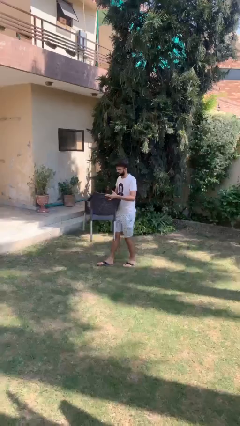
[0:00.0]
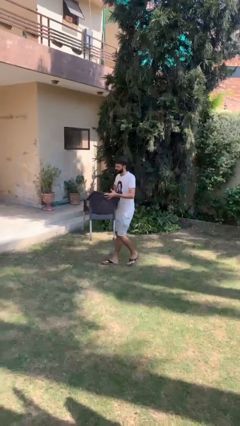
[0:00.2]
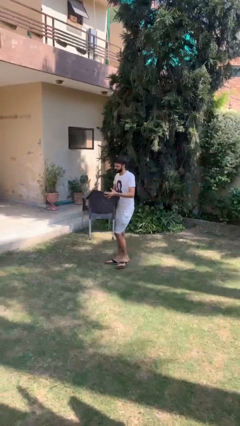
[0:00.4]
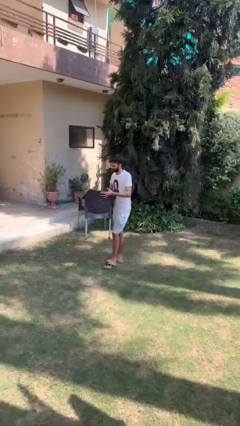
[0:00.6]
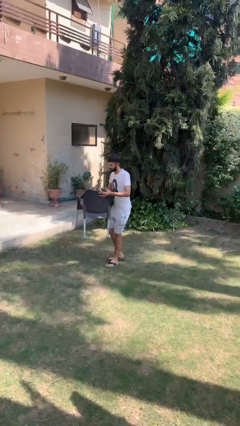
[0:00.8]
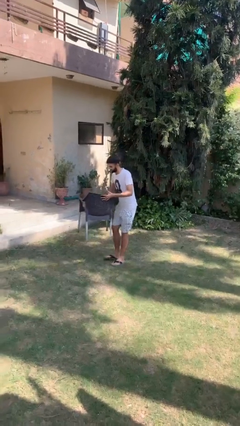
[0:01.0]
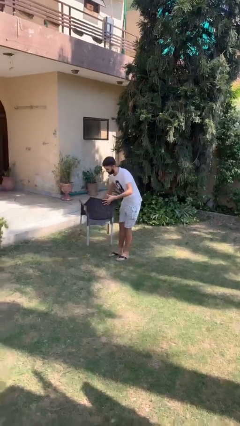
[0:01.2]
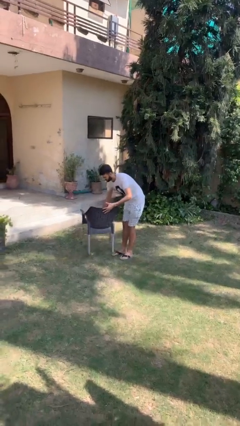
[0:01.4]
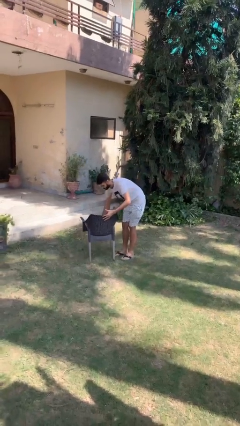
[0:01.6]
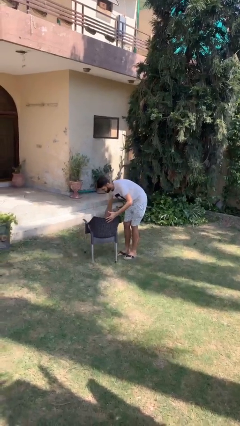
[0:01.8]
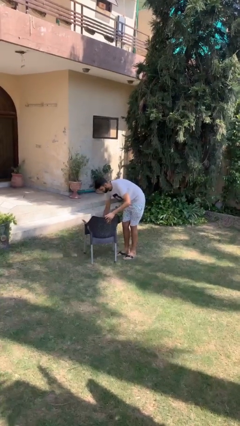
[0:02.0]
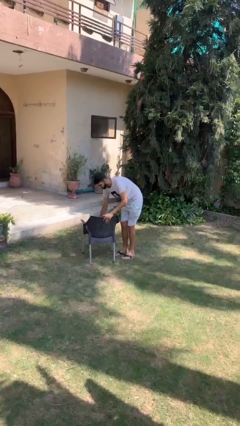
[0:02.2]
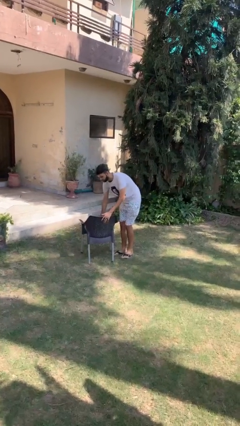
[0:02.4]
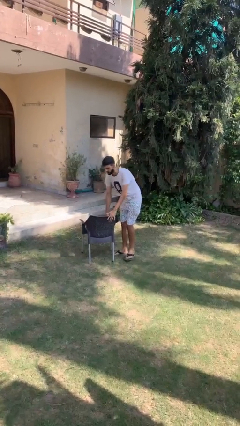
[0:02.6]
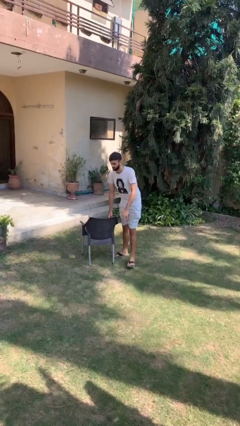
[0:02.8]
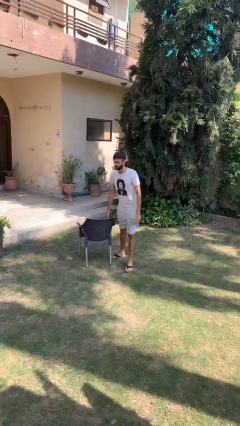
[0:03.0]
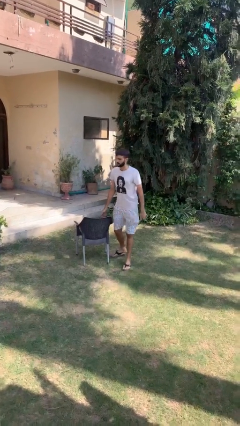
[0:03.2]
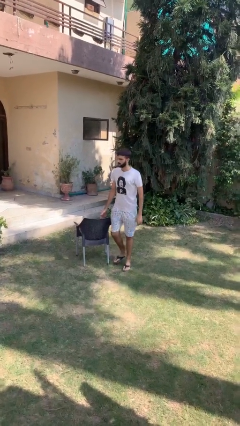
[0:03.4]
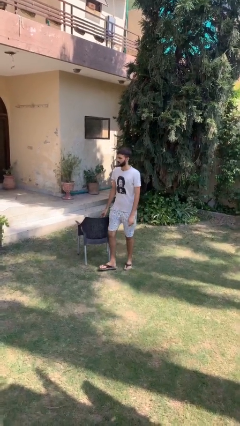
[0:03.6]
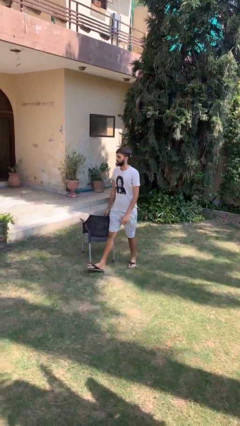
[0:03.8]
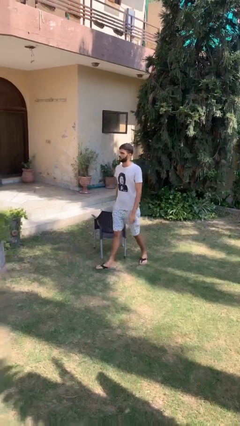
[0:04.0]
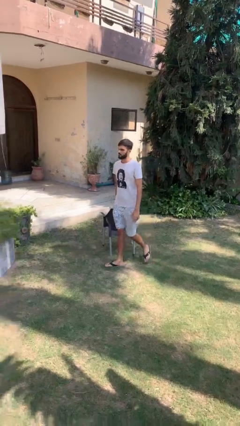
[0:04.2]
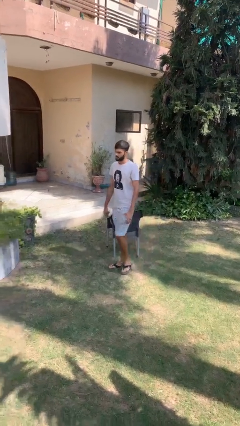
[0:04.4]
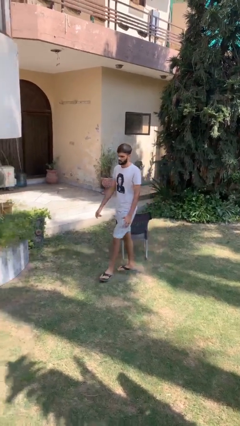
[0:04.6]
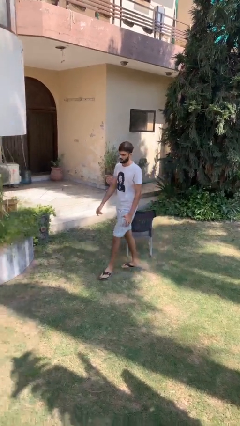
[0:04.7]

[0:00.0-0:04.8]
person puts down object on floor

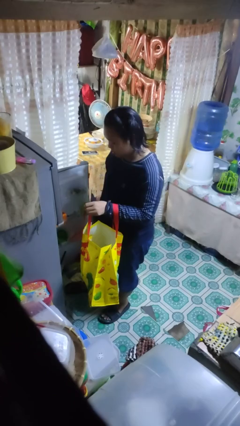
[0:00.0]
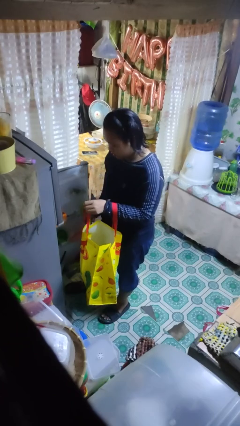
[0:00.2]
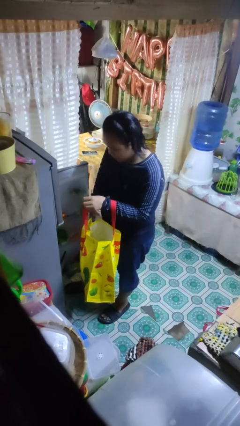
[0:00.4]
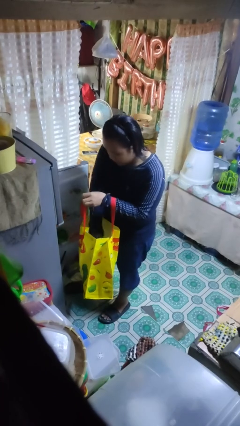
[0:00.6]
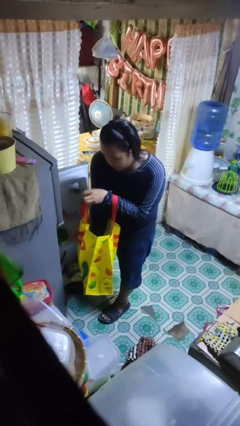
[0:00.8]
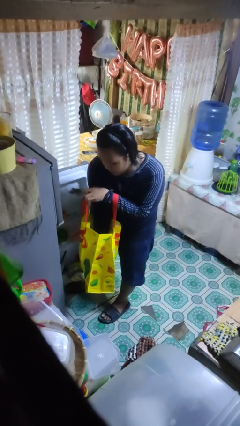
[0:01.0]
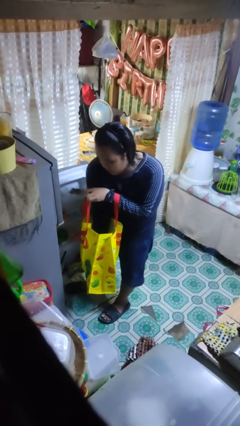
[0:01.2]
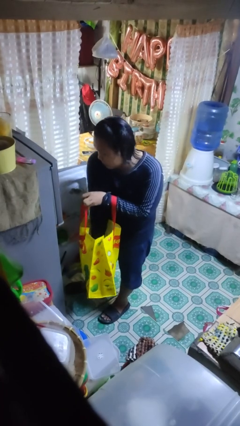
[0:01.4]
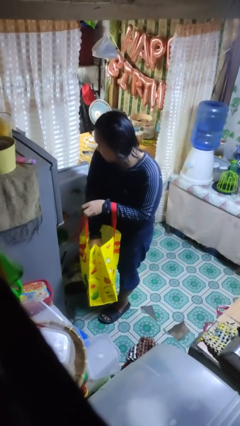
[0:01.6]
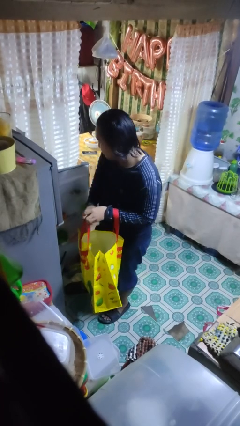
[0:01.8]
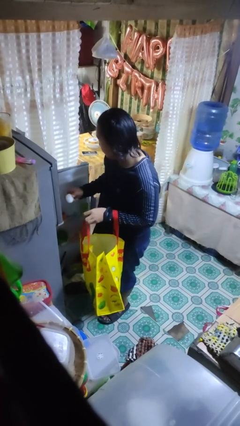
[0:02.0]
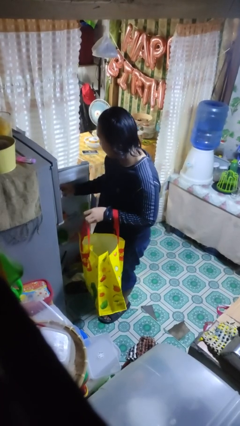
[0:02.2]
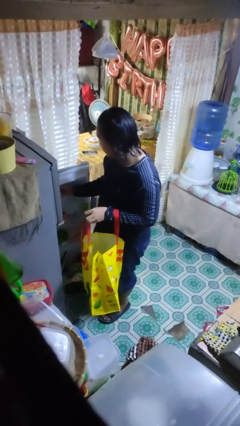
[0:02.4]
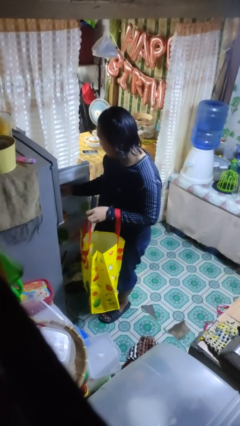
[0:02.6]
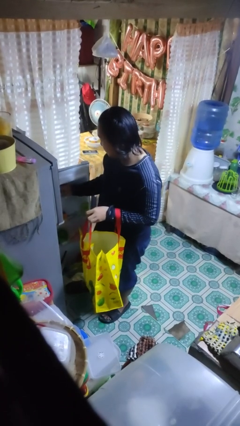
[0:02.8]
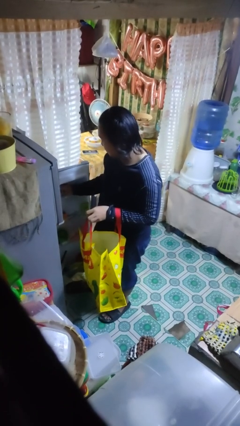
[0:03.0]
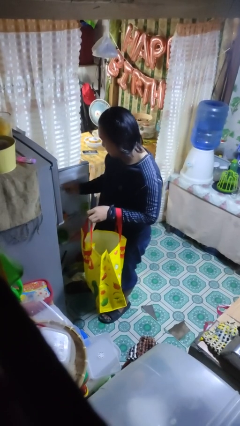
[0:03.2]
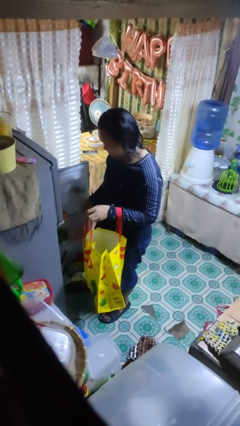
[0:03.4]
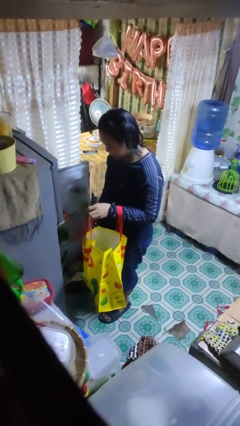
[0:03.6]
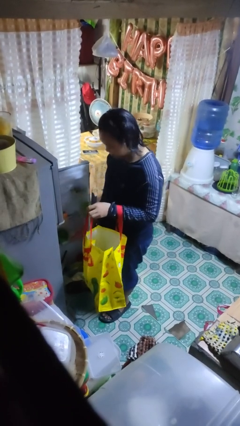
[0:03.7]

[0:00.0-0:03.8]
person loads groceries into refrigerator

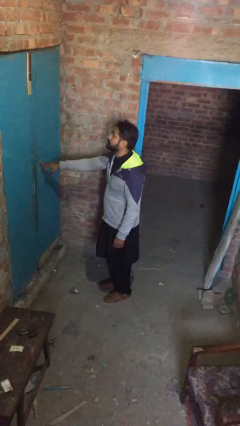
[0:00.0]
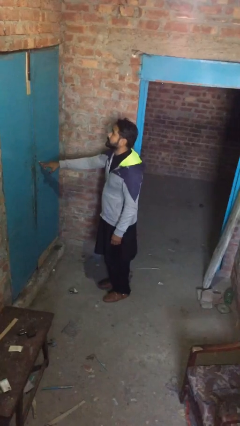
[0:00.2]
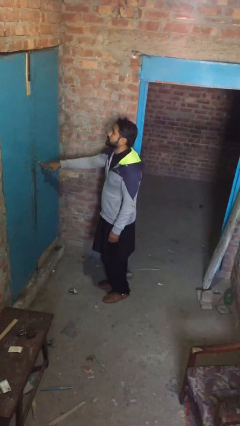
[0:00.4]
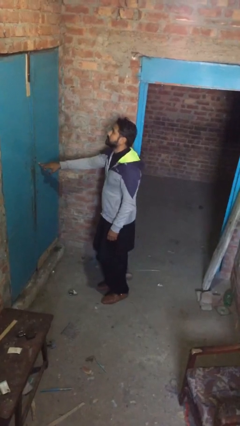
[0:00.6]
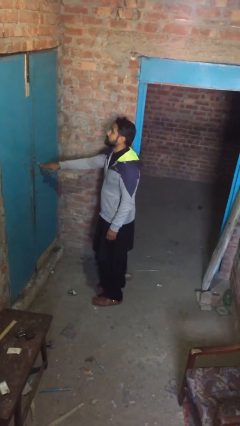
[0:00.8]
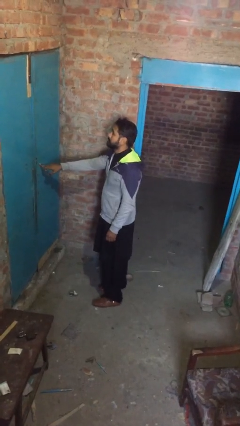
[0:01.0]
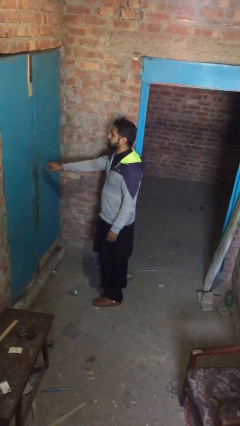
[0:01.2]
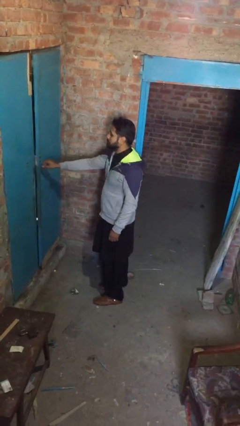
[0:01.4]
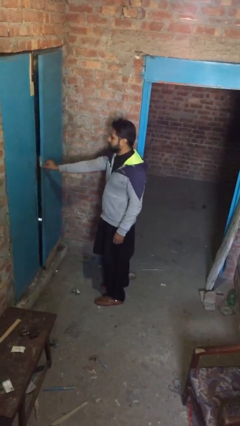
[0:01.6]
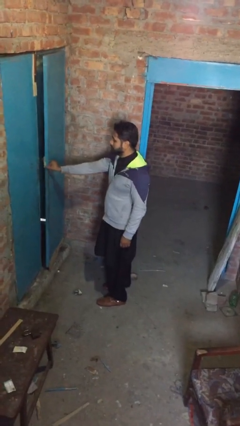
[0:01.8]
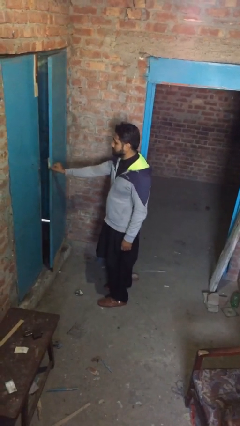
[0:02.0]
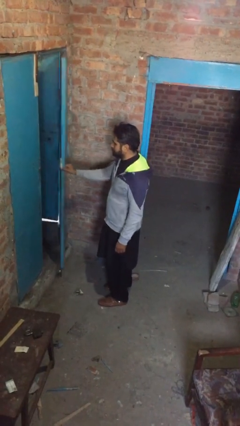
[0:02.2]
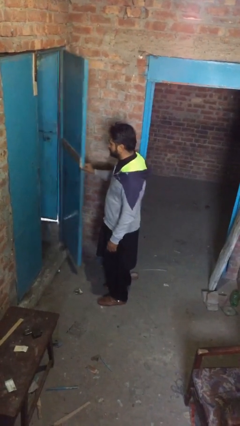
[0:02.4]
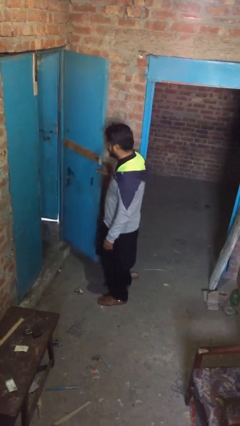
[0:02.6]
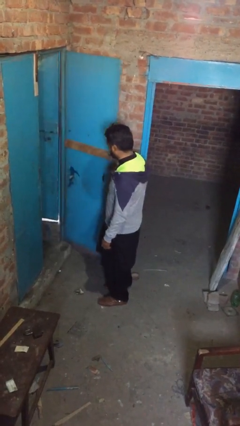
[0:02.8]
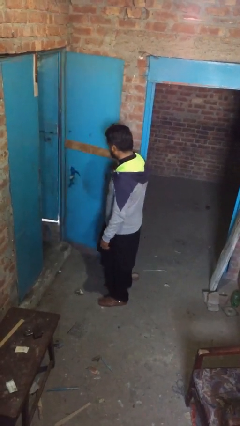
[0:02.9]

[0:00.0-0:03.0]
person opens facility door

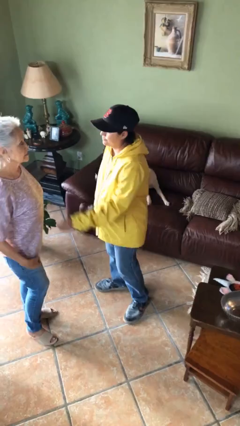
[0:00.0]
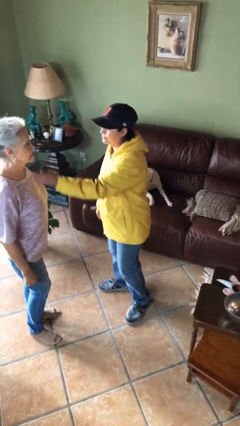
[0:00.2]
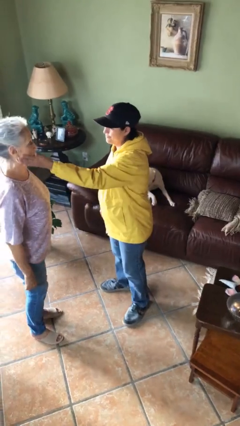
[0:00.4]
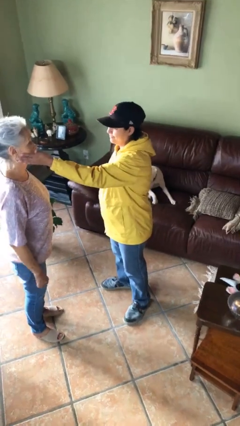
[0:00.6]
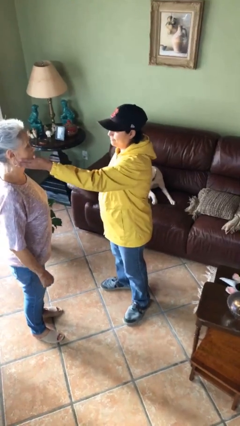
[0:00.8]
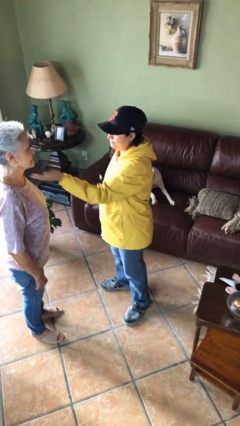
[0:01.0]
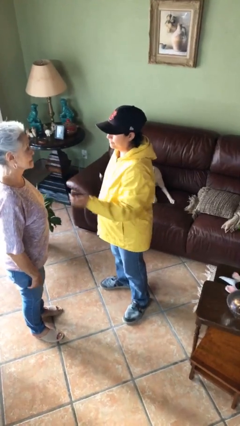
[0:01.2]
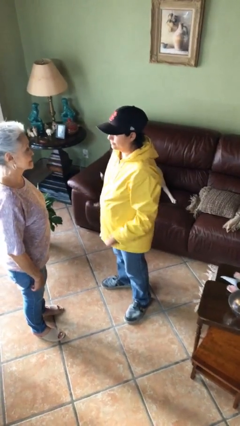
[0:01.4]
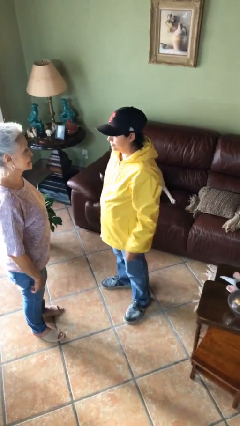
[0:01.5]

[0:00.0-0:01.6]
person touches face of person

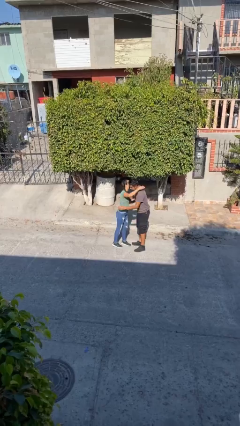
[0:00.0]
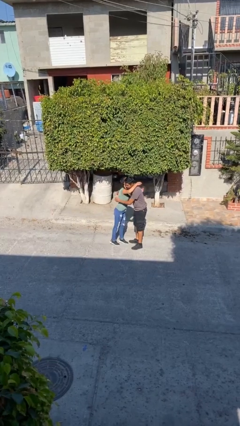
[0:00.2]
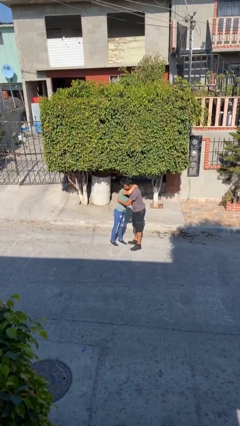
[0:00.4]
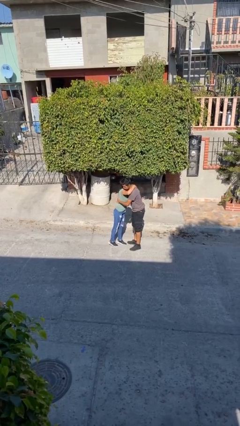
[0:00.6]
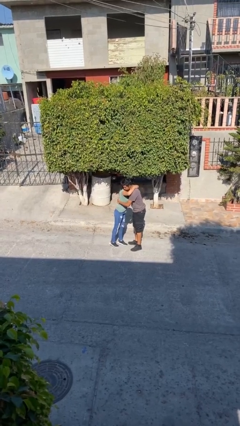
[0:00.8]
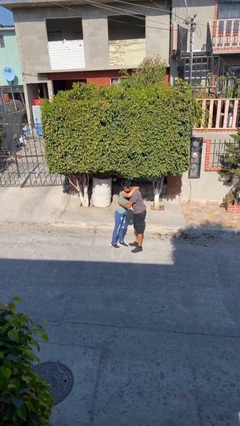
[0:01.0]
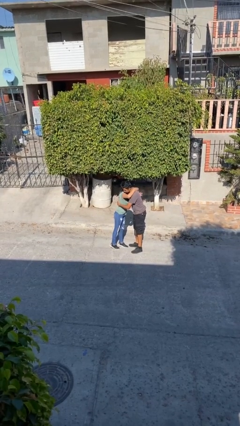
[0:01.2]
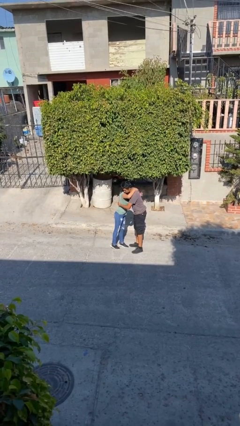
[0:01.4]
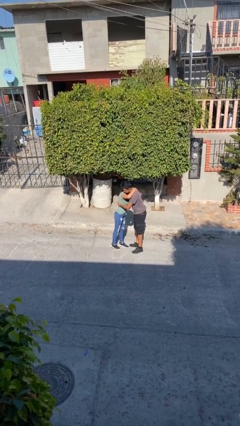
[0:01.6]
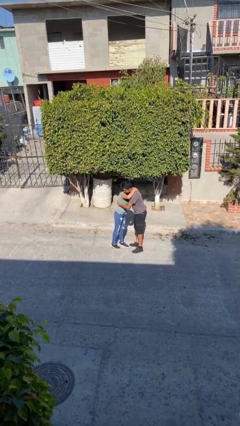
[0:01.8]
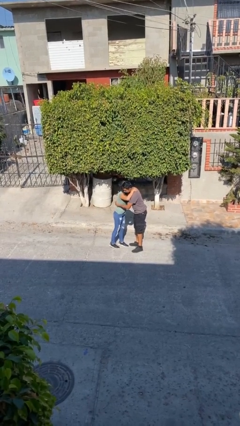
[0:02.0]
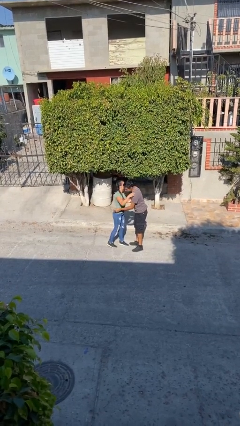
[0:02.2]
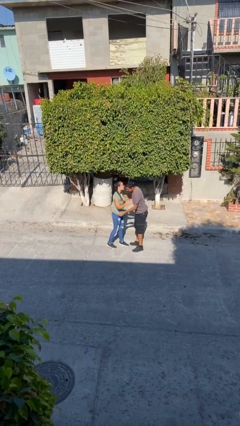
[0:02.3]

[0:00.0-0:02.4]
person embraces person

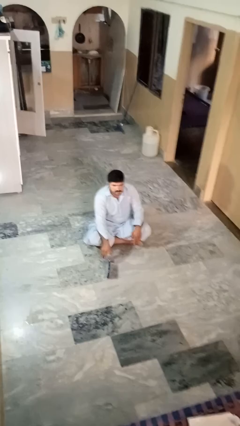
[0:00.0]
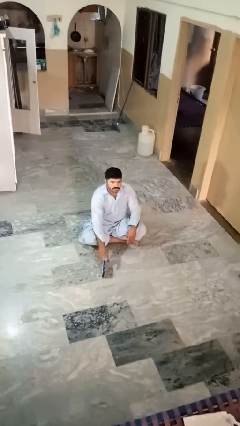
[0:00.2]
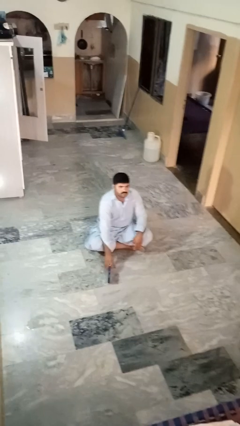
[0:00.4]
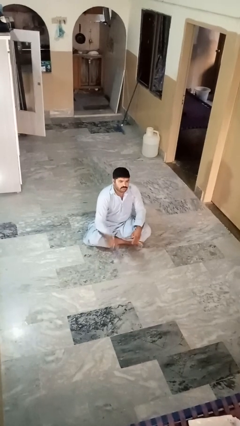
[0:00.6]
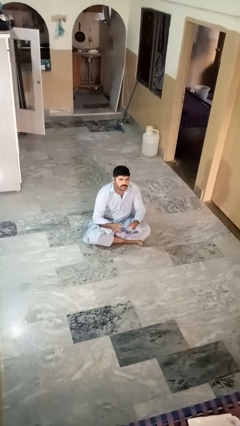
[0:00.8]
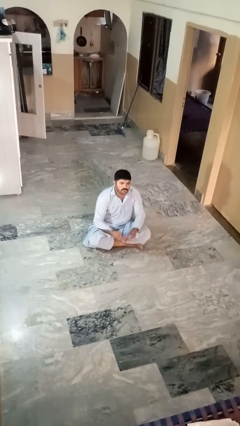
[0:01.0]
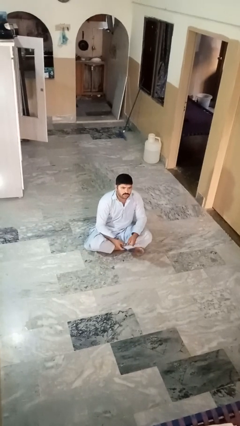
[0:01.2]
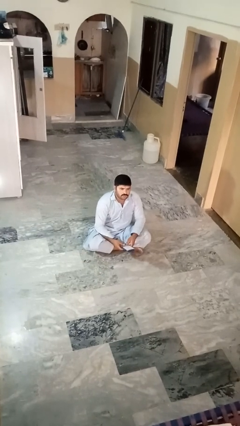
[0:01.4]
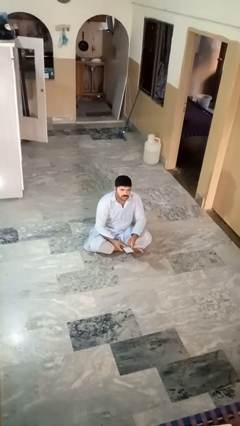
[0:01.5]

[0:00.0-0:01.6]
person picks up object from floor

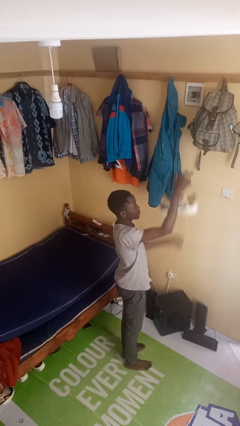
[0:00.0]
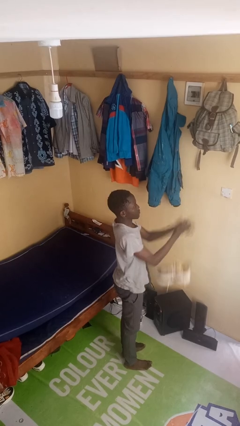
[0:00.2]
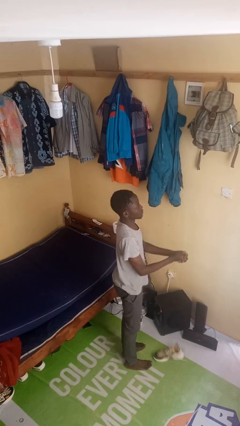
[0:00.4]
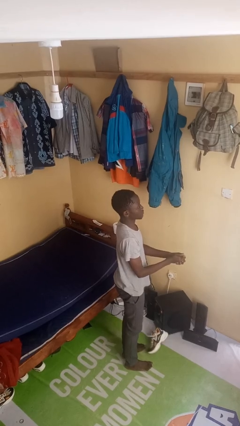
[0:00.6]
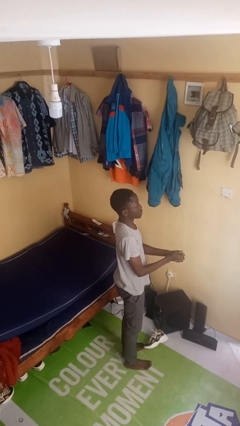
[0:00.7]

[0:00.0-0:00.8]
person drops object
